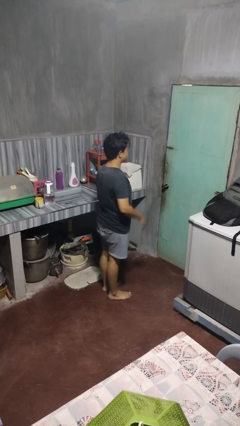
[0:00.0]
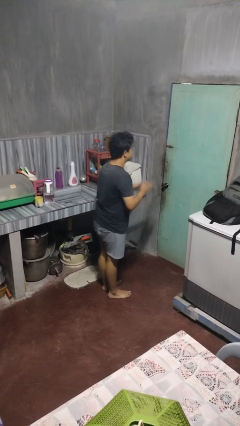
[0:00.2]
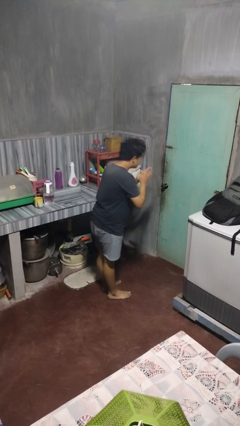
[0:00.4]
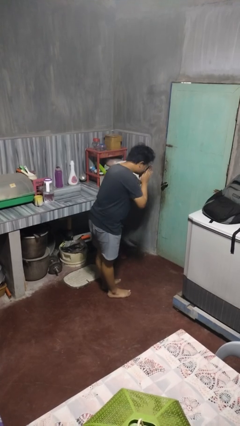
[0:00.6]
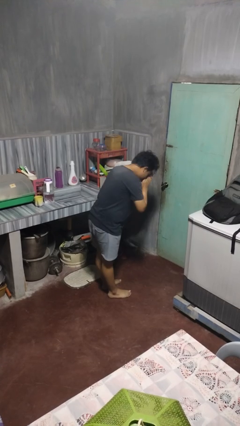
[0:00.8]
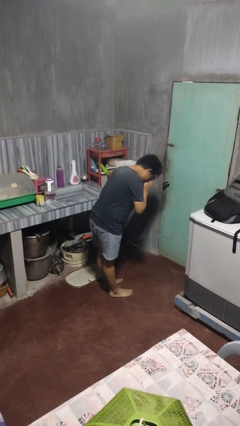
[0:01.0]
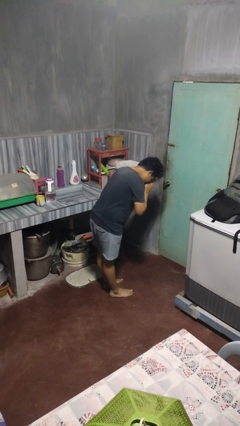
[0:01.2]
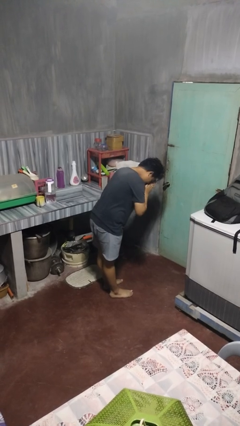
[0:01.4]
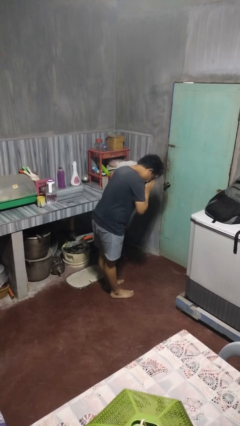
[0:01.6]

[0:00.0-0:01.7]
person prays

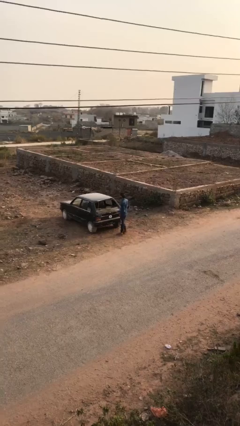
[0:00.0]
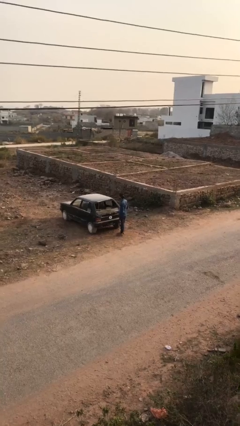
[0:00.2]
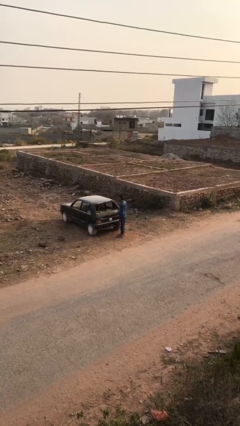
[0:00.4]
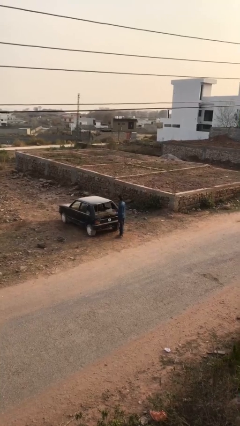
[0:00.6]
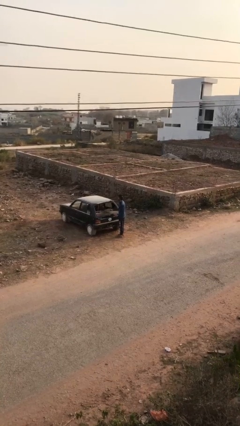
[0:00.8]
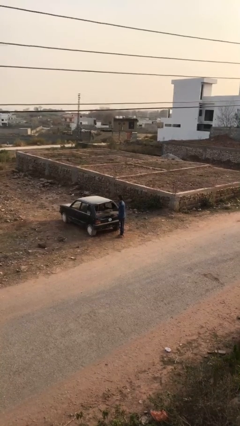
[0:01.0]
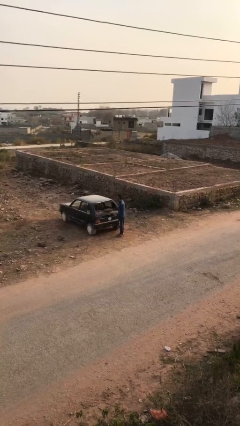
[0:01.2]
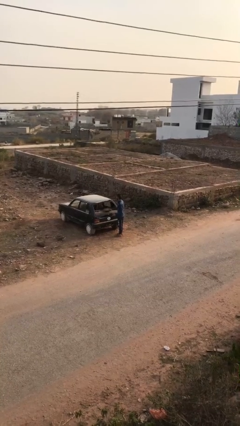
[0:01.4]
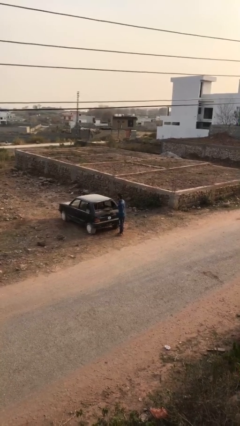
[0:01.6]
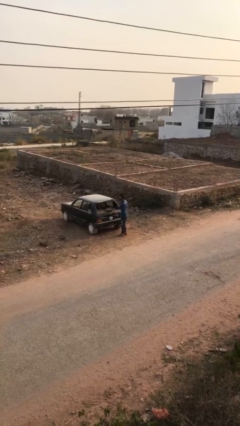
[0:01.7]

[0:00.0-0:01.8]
person loads car

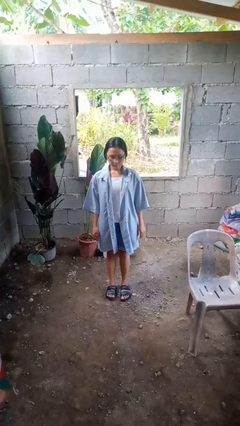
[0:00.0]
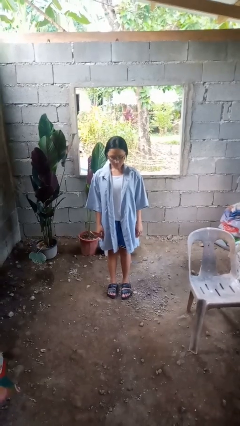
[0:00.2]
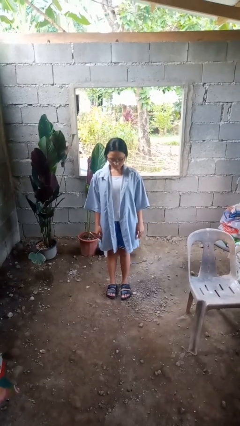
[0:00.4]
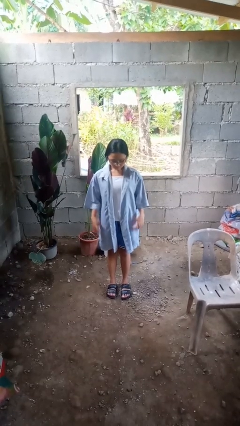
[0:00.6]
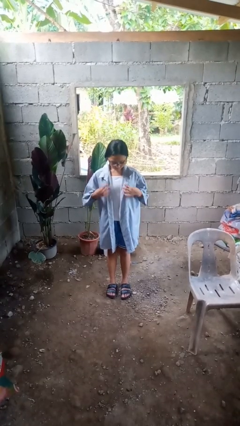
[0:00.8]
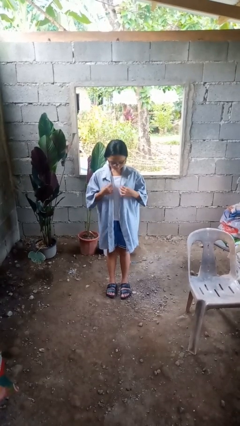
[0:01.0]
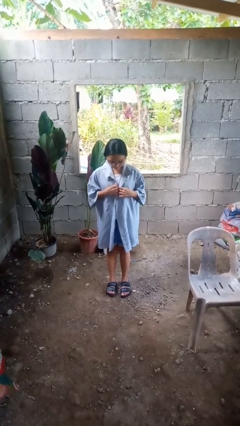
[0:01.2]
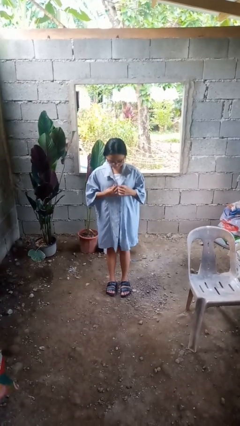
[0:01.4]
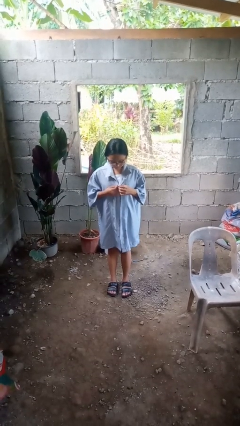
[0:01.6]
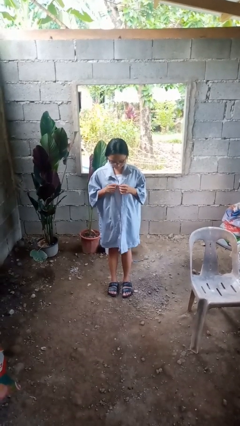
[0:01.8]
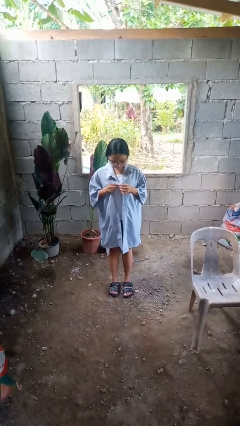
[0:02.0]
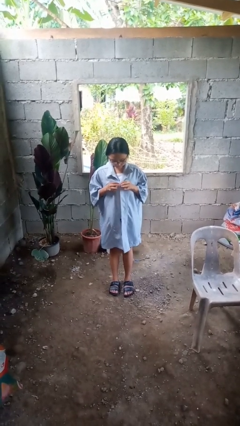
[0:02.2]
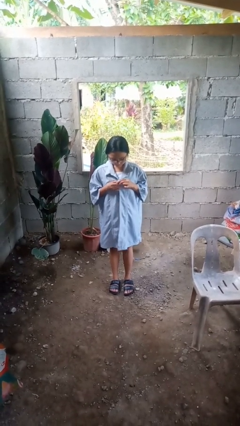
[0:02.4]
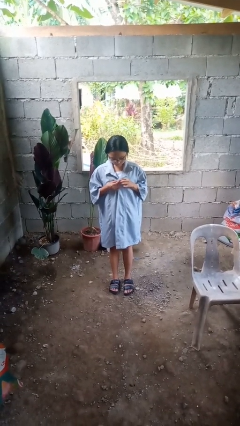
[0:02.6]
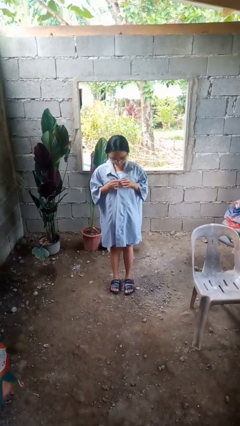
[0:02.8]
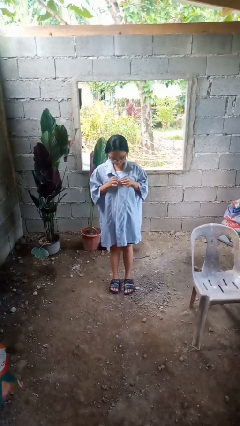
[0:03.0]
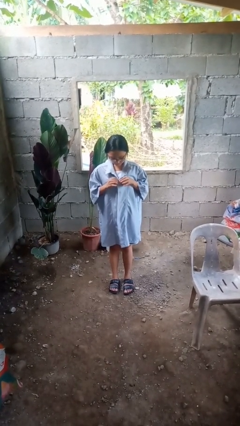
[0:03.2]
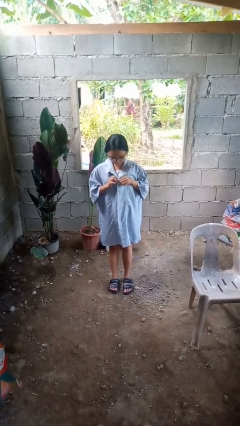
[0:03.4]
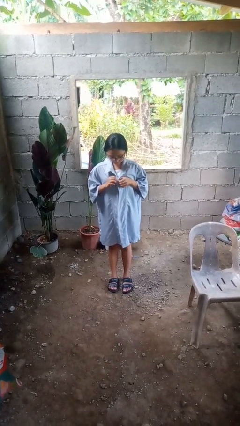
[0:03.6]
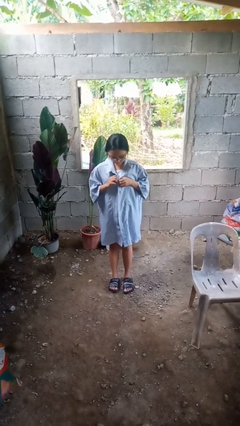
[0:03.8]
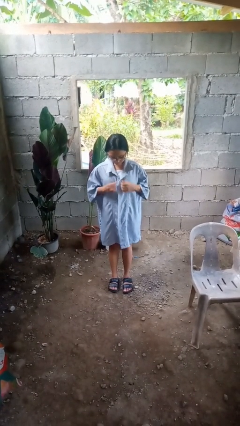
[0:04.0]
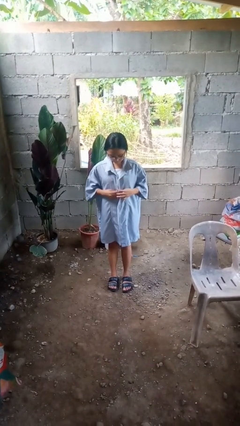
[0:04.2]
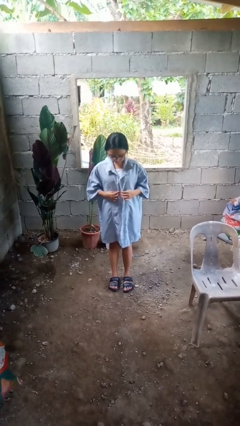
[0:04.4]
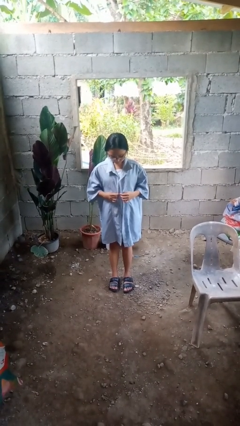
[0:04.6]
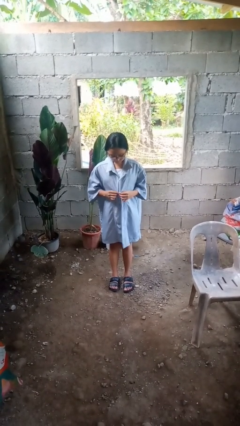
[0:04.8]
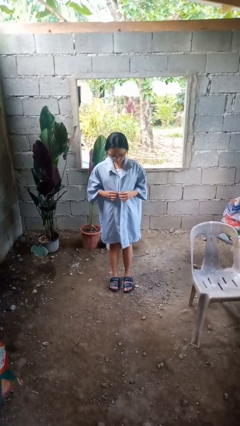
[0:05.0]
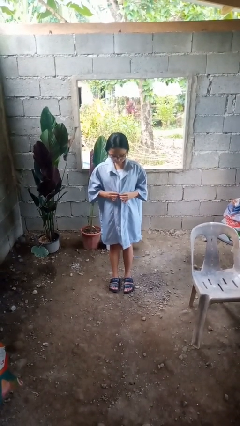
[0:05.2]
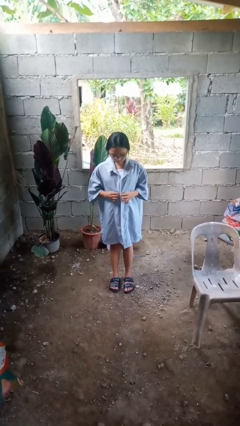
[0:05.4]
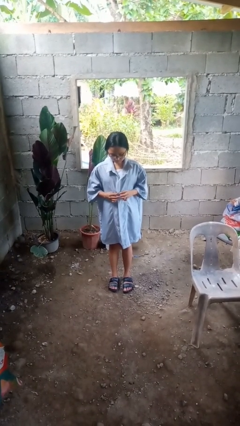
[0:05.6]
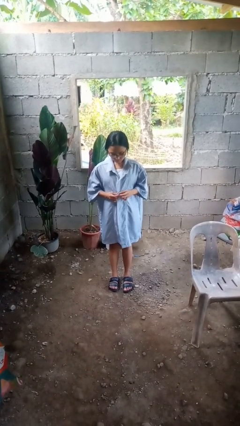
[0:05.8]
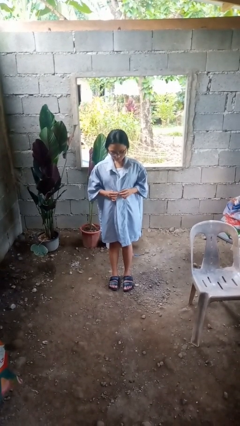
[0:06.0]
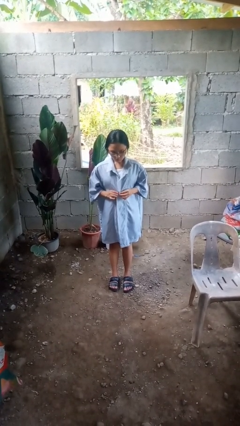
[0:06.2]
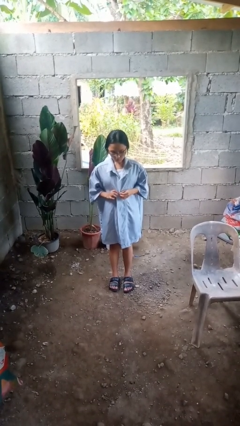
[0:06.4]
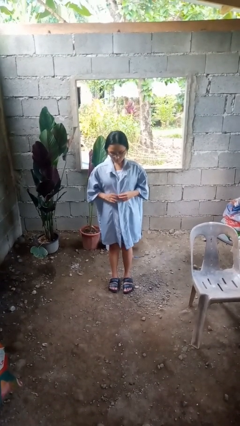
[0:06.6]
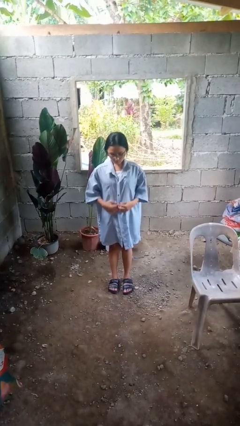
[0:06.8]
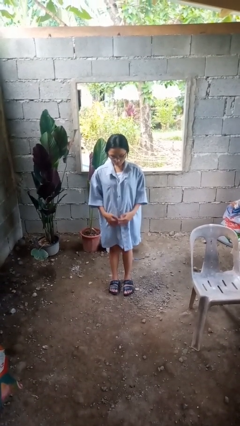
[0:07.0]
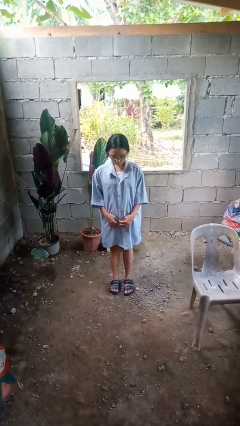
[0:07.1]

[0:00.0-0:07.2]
person buttons shirt

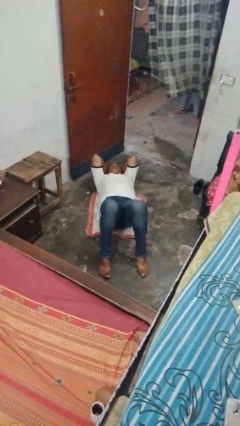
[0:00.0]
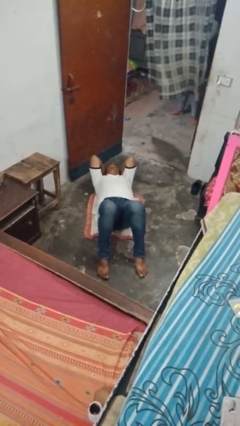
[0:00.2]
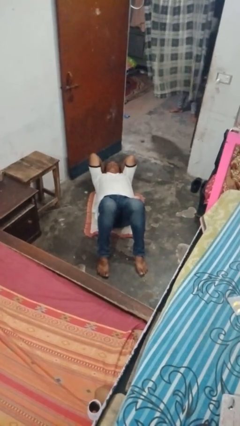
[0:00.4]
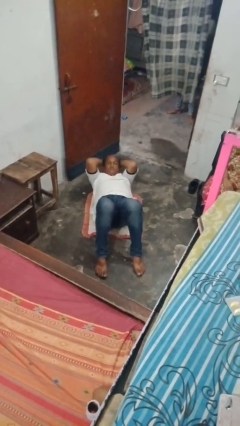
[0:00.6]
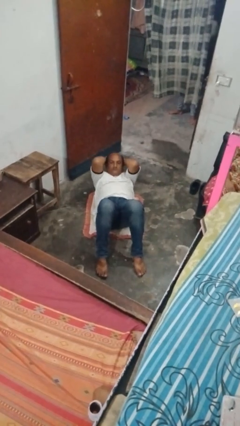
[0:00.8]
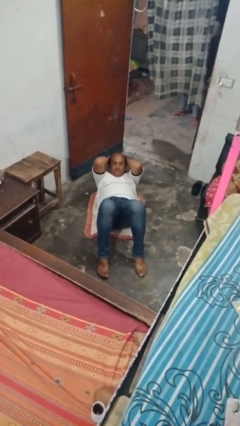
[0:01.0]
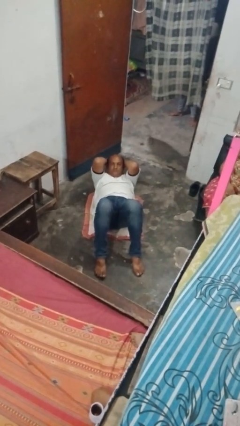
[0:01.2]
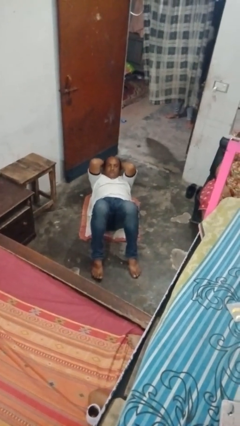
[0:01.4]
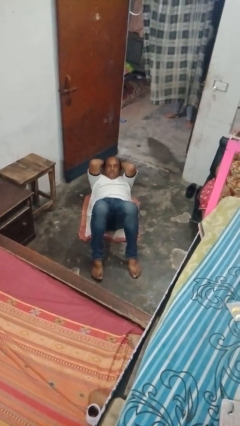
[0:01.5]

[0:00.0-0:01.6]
person exercises with situp

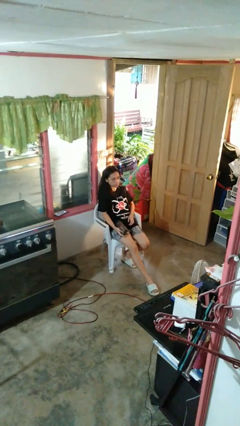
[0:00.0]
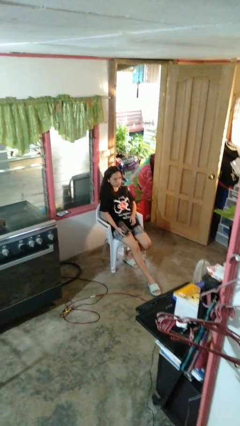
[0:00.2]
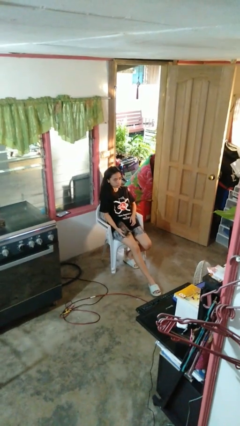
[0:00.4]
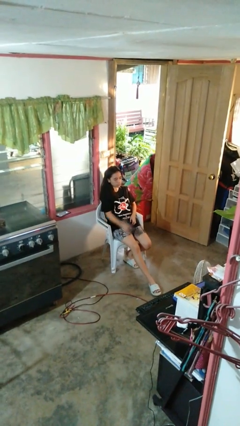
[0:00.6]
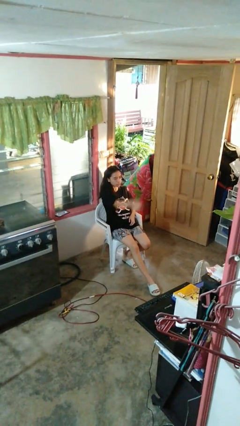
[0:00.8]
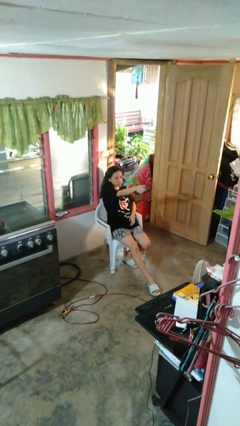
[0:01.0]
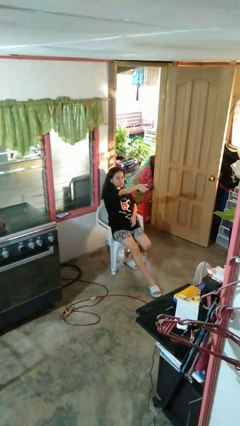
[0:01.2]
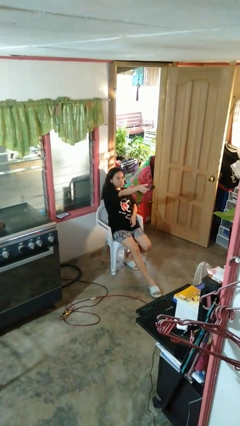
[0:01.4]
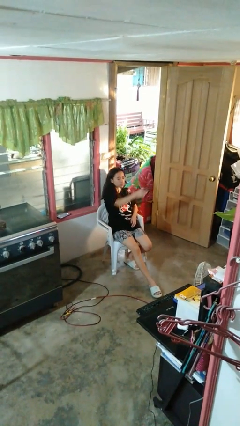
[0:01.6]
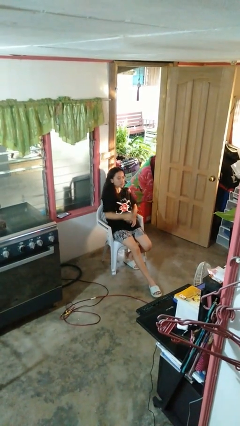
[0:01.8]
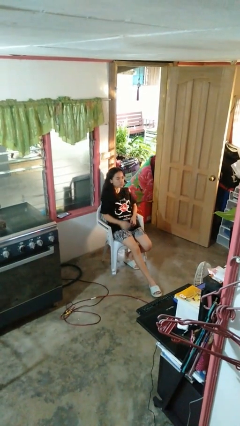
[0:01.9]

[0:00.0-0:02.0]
person uses television remote

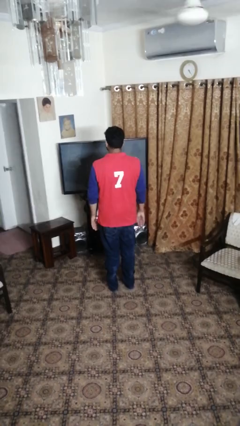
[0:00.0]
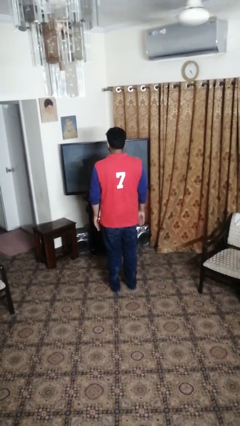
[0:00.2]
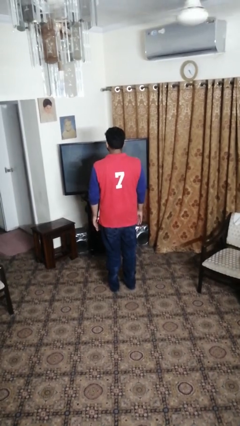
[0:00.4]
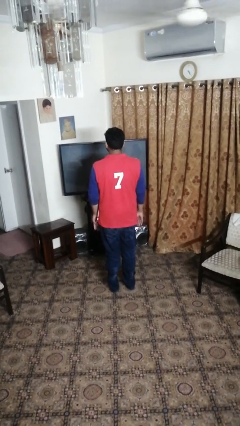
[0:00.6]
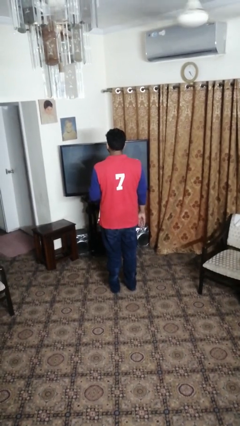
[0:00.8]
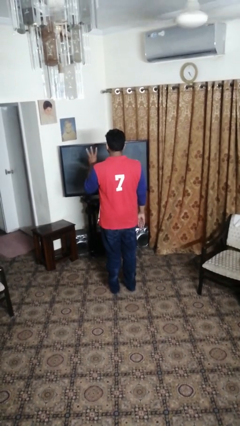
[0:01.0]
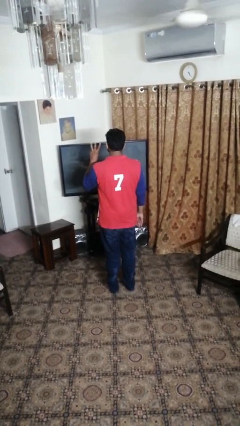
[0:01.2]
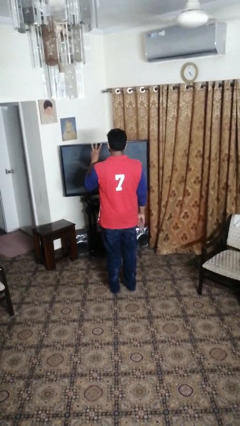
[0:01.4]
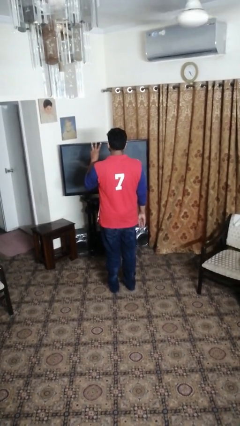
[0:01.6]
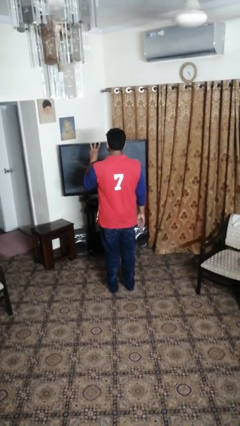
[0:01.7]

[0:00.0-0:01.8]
person gestures number three

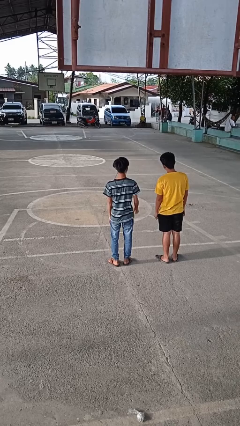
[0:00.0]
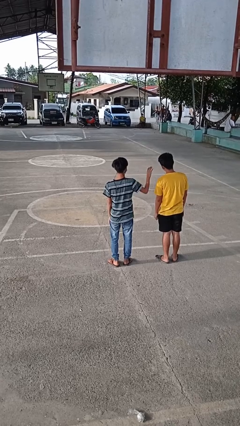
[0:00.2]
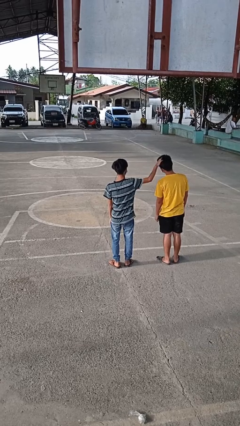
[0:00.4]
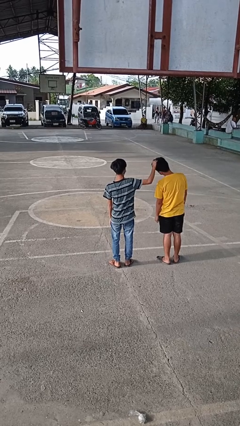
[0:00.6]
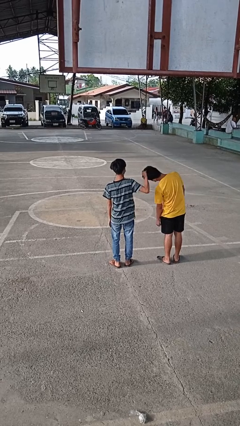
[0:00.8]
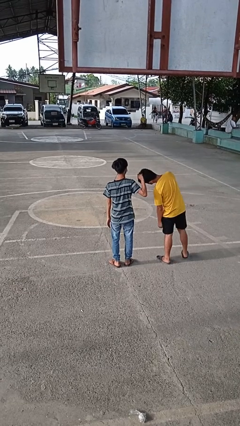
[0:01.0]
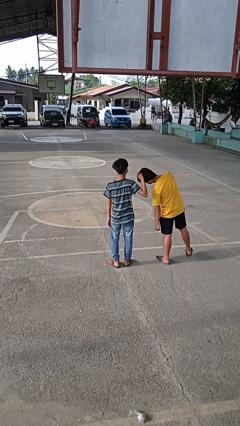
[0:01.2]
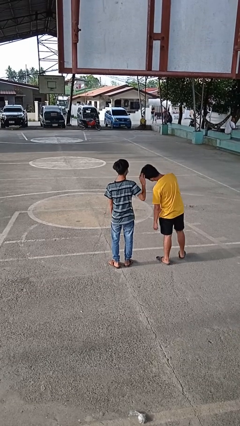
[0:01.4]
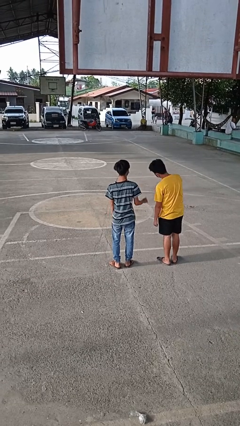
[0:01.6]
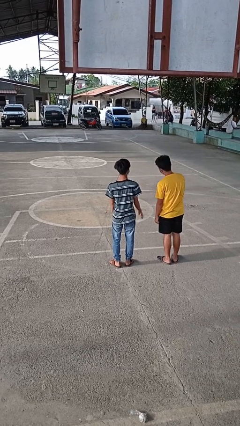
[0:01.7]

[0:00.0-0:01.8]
person grabs person by hair
